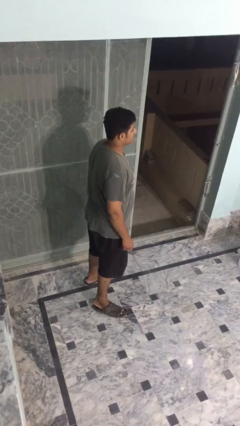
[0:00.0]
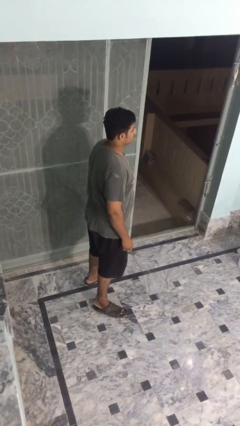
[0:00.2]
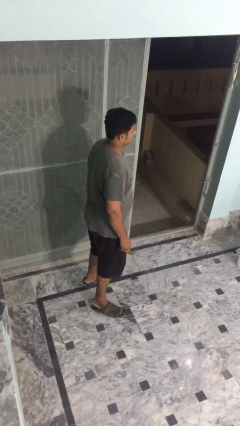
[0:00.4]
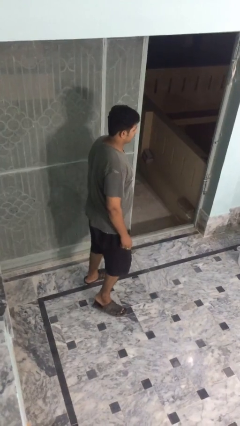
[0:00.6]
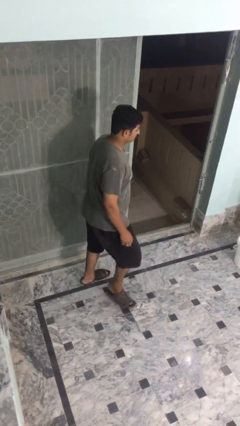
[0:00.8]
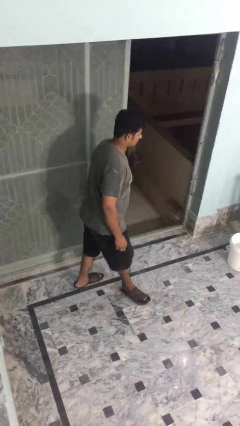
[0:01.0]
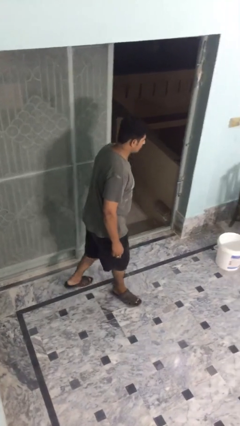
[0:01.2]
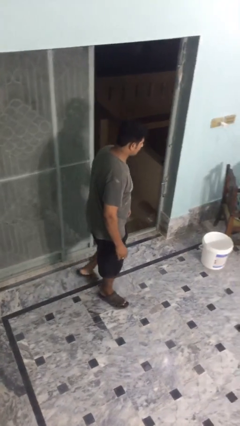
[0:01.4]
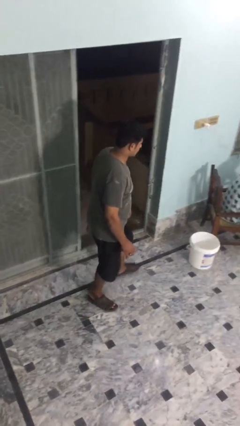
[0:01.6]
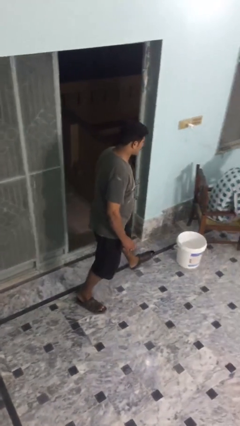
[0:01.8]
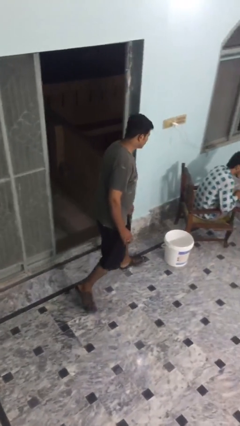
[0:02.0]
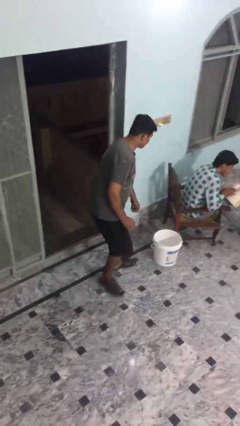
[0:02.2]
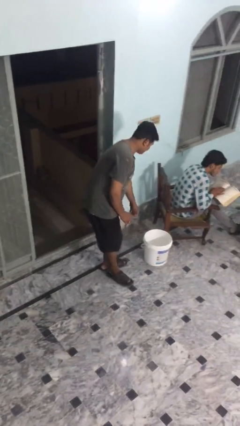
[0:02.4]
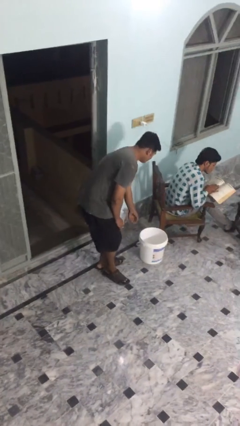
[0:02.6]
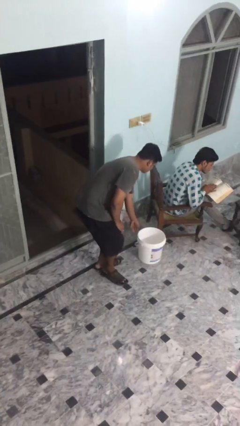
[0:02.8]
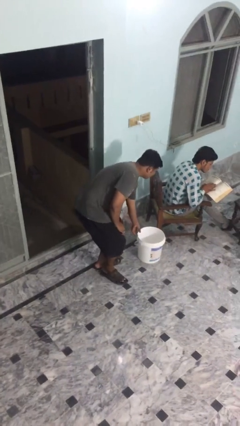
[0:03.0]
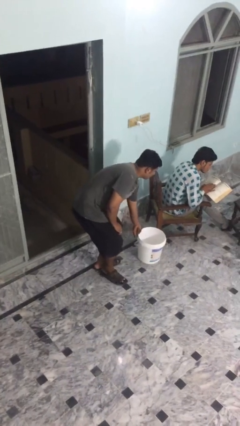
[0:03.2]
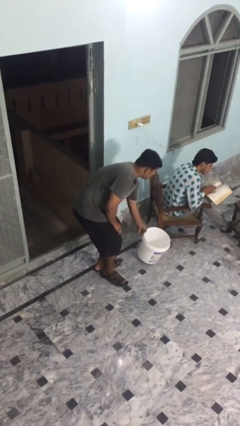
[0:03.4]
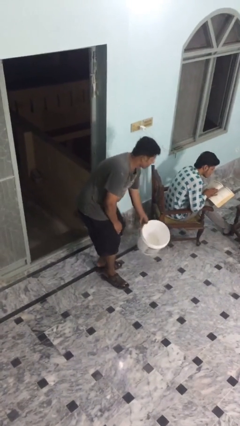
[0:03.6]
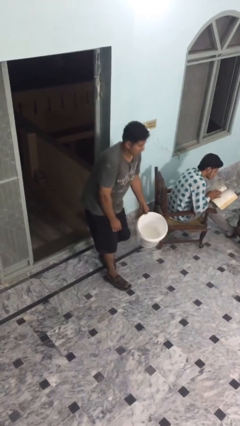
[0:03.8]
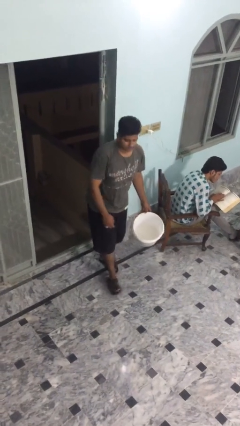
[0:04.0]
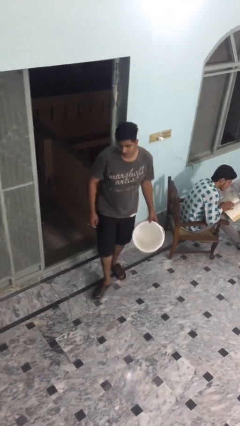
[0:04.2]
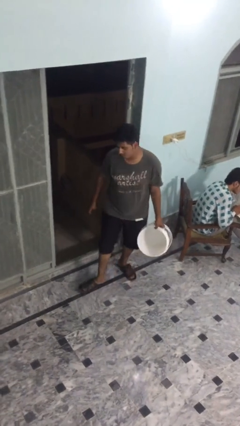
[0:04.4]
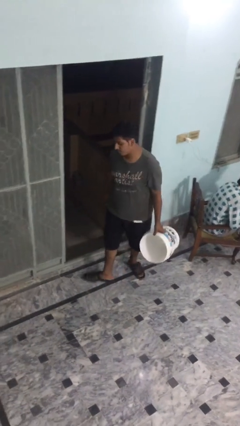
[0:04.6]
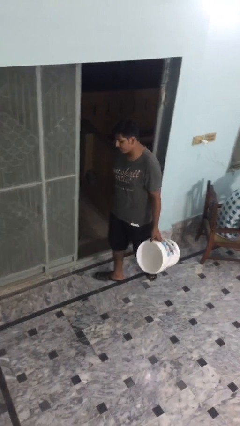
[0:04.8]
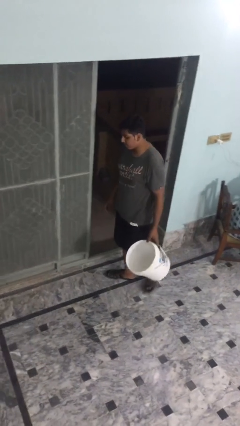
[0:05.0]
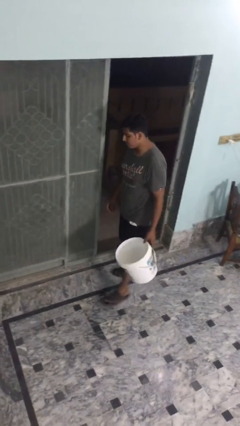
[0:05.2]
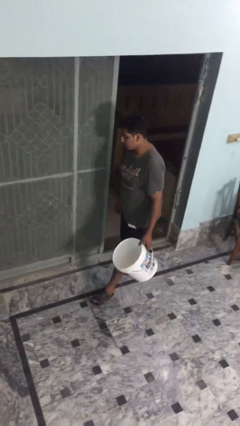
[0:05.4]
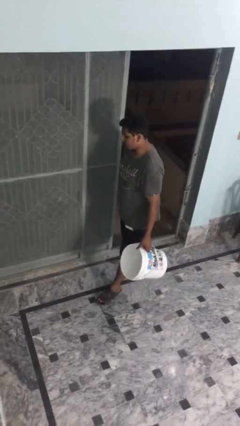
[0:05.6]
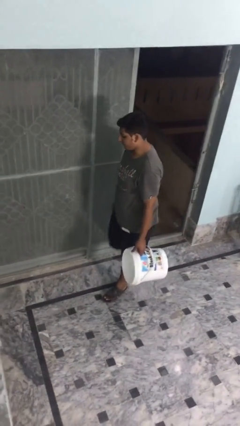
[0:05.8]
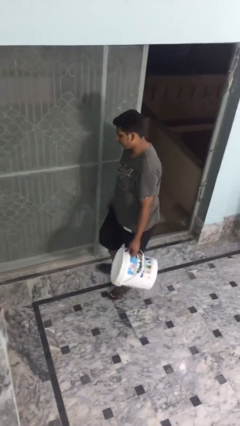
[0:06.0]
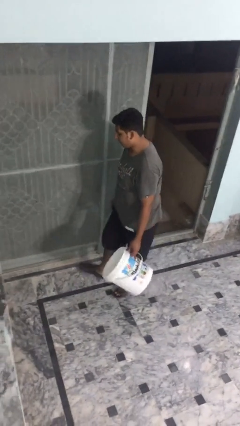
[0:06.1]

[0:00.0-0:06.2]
person steals object from person

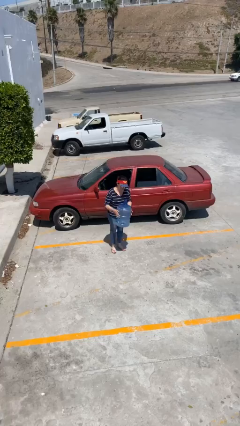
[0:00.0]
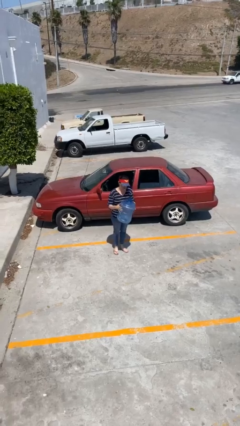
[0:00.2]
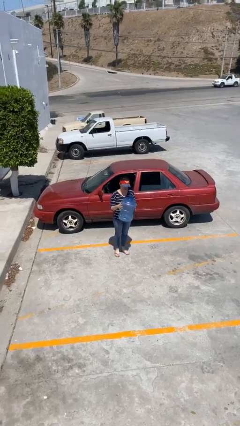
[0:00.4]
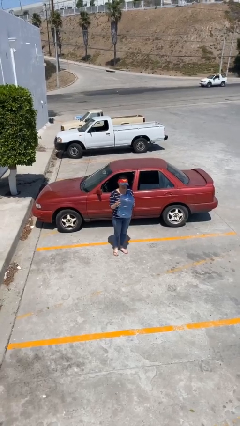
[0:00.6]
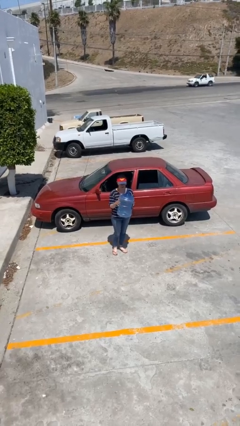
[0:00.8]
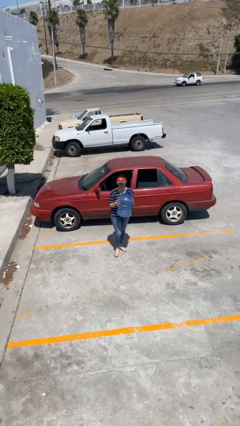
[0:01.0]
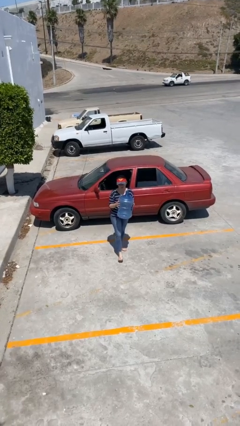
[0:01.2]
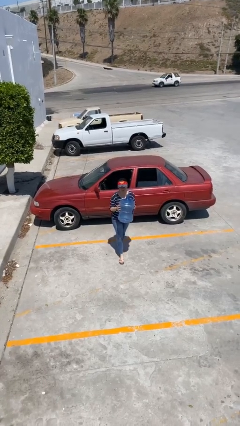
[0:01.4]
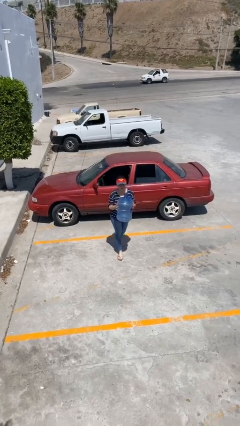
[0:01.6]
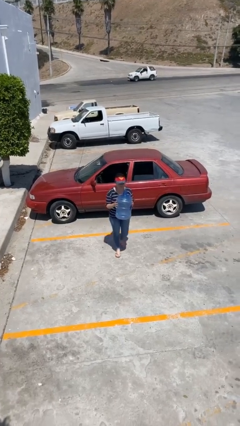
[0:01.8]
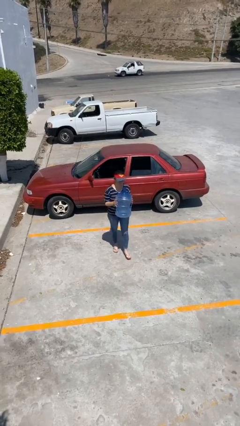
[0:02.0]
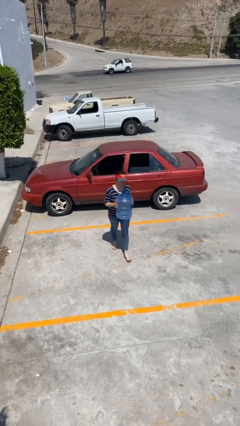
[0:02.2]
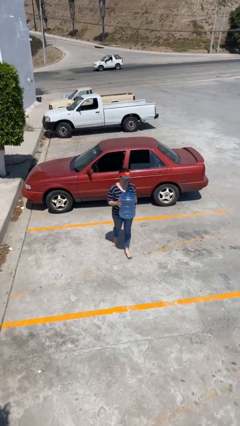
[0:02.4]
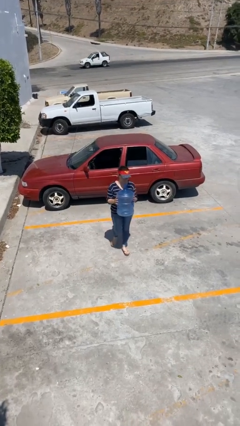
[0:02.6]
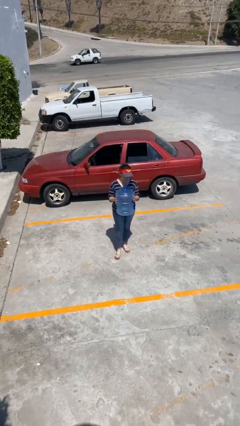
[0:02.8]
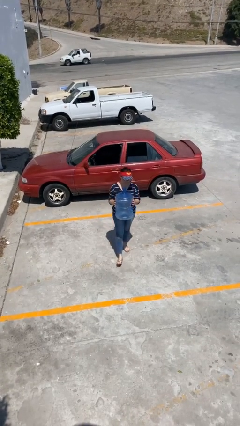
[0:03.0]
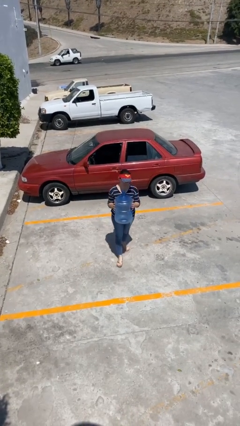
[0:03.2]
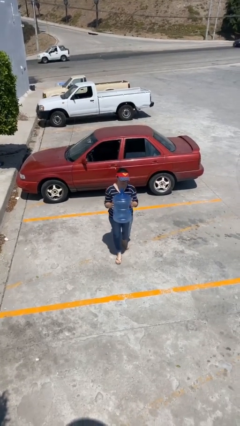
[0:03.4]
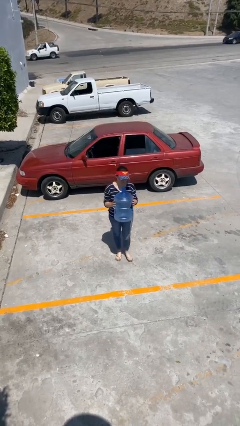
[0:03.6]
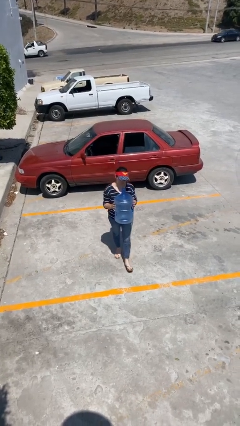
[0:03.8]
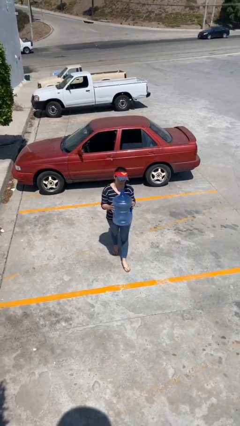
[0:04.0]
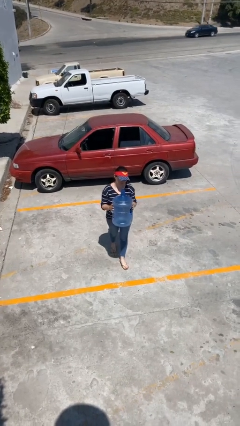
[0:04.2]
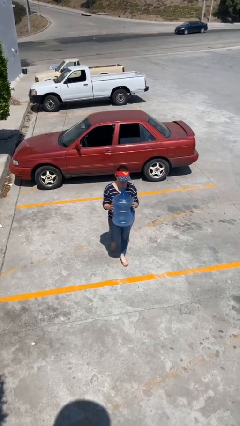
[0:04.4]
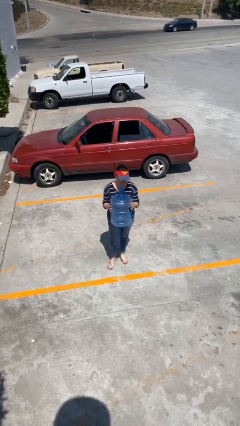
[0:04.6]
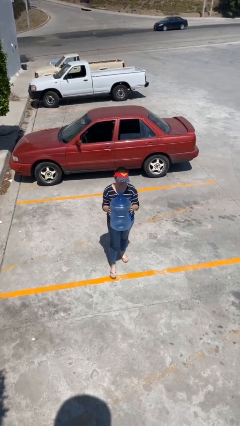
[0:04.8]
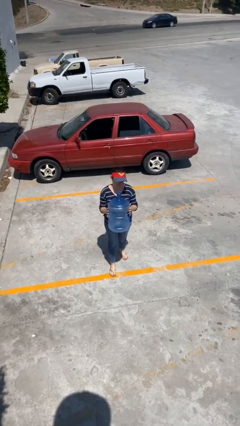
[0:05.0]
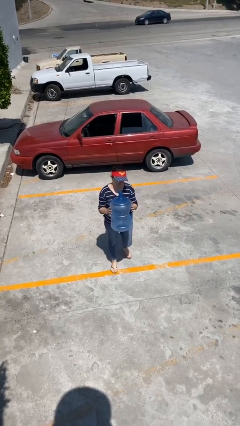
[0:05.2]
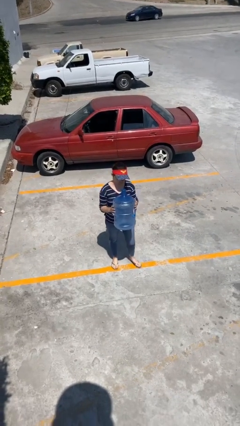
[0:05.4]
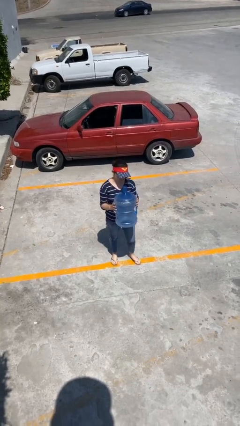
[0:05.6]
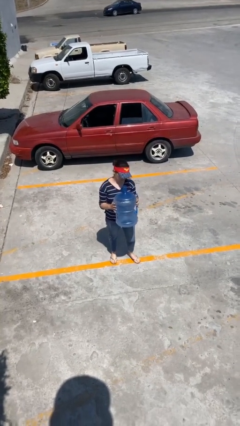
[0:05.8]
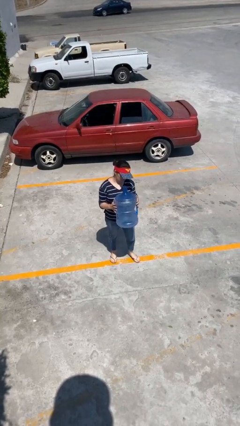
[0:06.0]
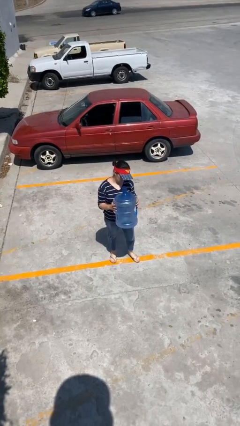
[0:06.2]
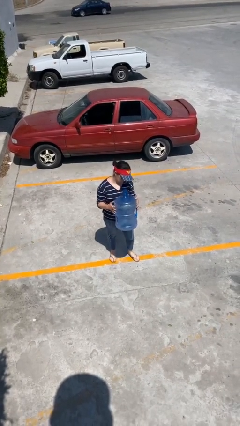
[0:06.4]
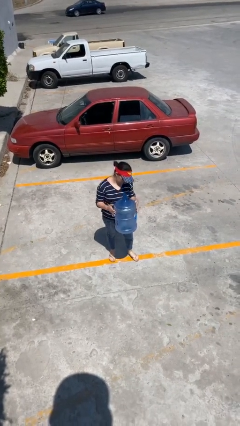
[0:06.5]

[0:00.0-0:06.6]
person carries heavy object

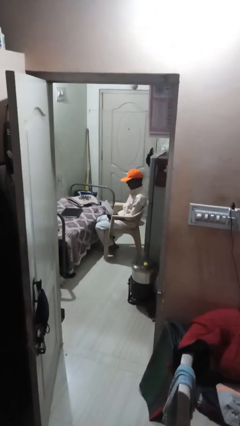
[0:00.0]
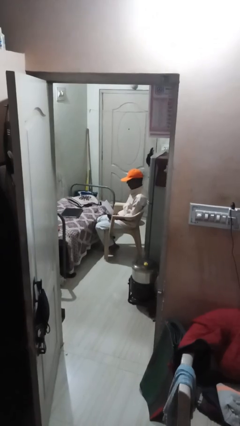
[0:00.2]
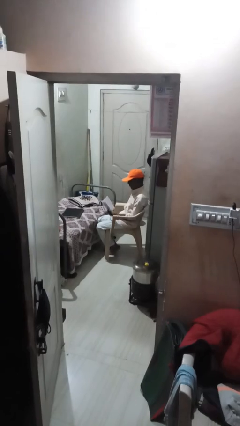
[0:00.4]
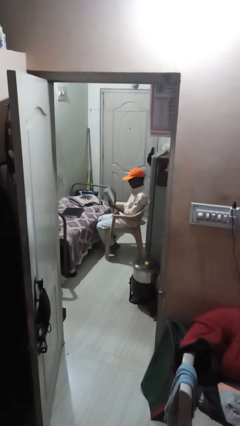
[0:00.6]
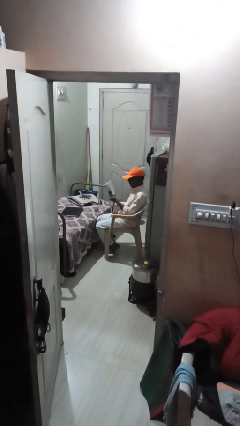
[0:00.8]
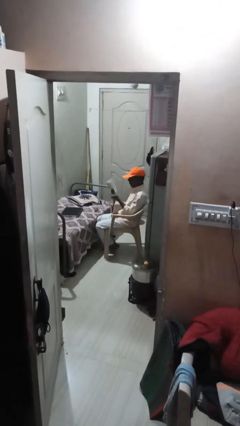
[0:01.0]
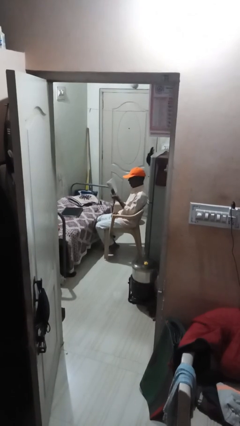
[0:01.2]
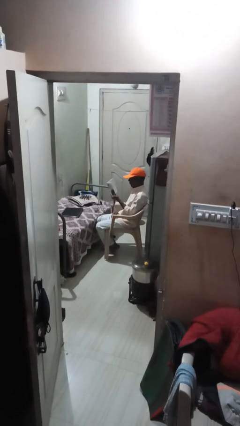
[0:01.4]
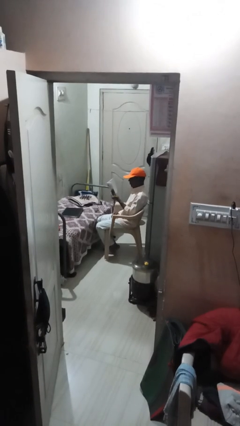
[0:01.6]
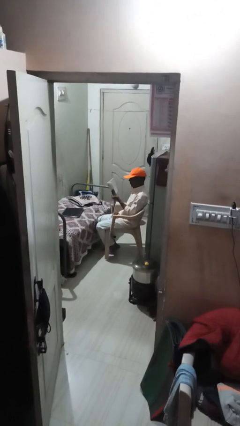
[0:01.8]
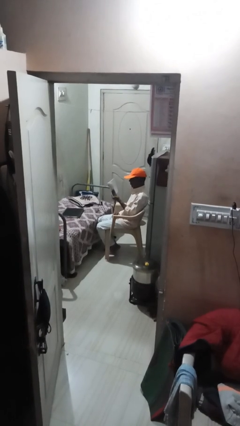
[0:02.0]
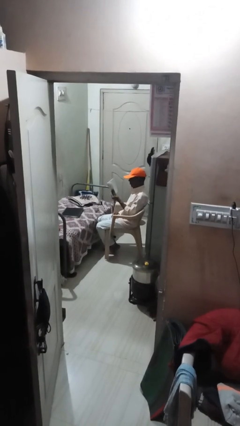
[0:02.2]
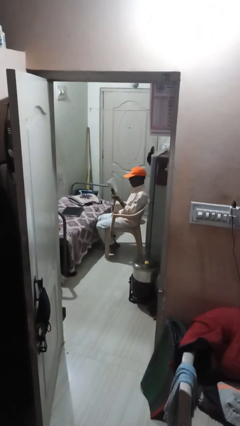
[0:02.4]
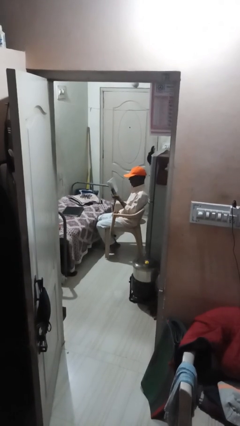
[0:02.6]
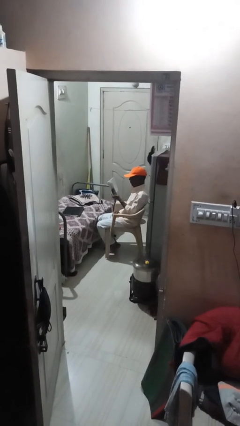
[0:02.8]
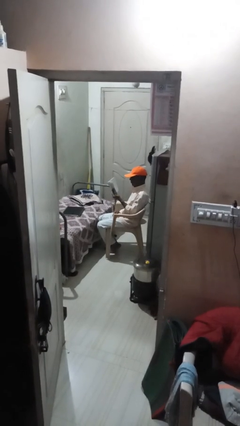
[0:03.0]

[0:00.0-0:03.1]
person reads document

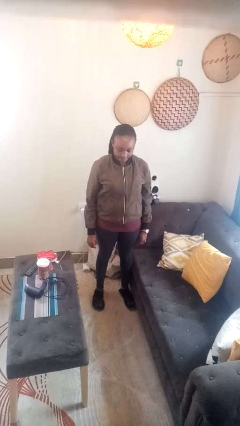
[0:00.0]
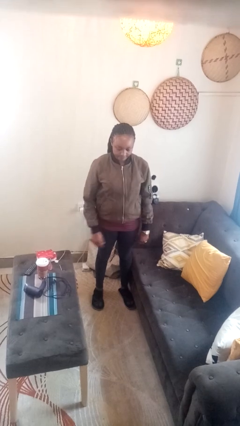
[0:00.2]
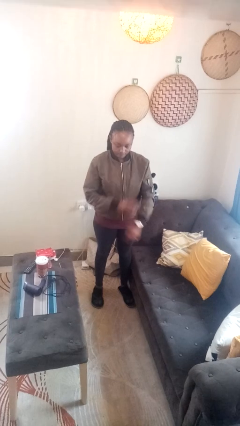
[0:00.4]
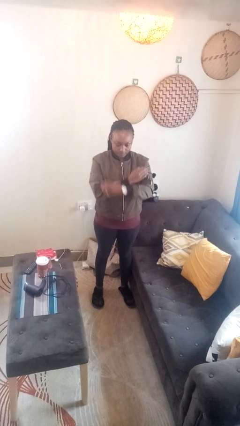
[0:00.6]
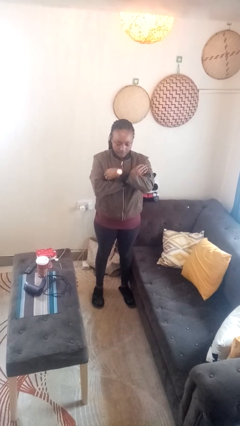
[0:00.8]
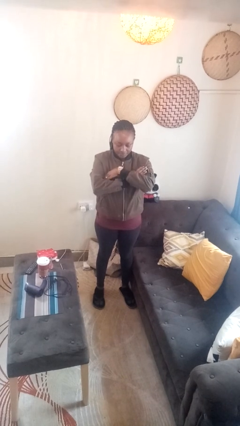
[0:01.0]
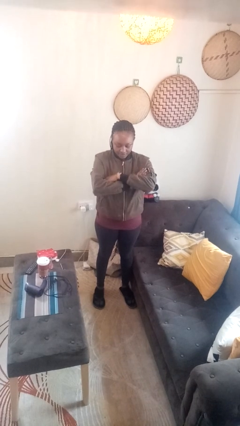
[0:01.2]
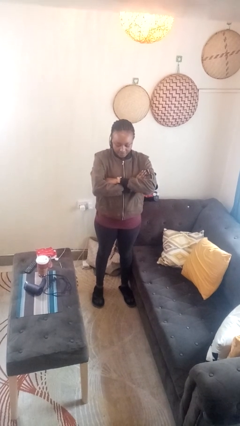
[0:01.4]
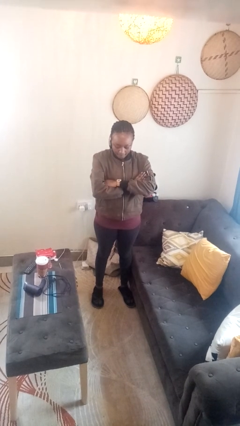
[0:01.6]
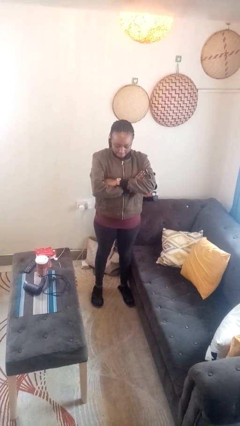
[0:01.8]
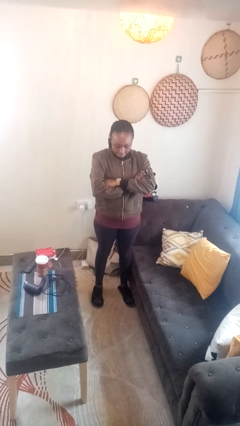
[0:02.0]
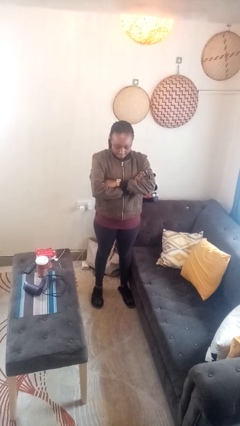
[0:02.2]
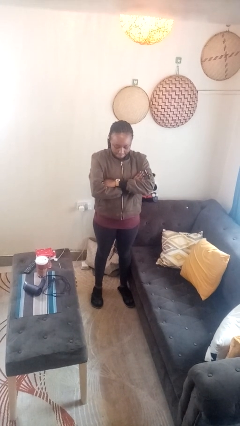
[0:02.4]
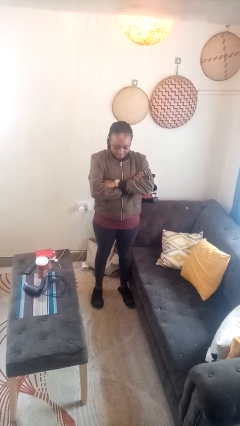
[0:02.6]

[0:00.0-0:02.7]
person gestures arms x
